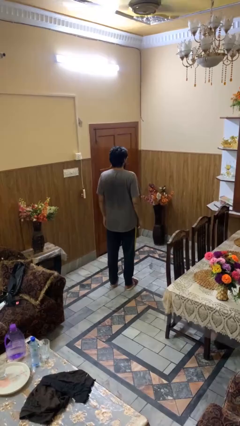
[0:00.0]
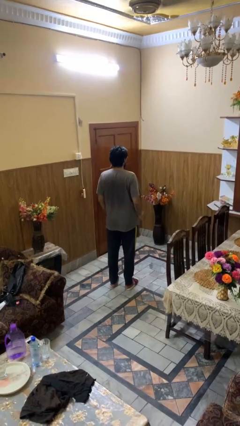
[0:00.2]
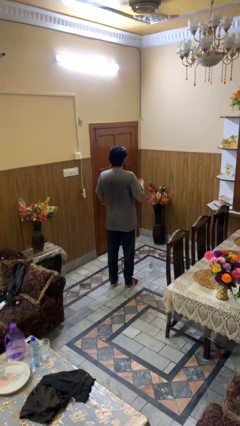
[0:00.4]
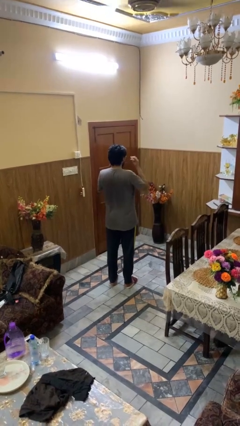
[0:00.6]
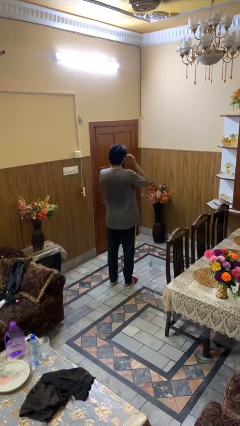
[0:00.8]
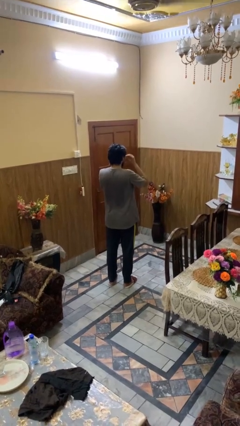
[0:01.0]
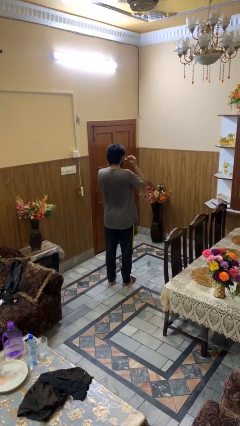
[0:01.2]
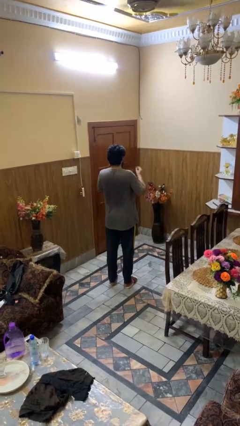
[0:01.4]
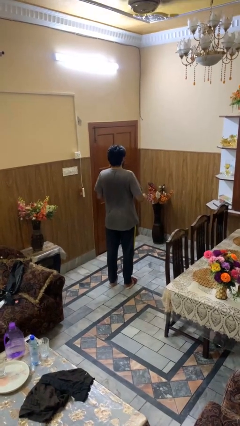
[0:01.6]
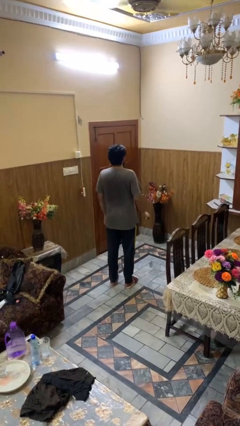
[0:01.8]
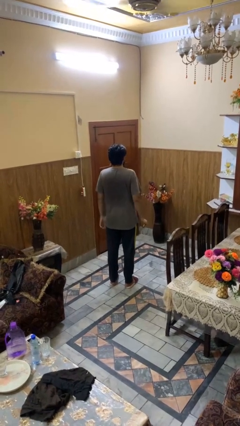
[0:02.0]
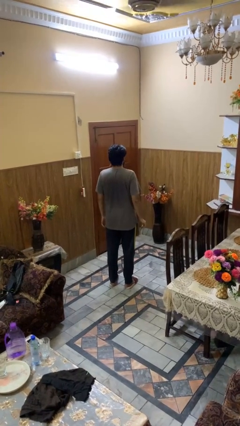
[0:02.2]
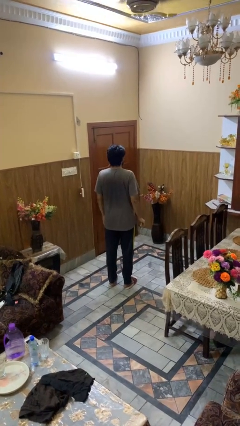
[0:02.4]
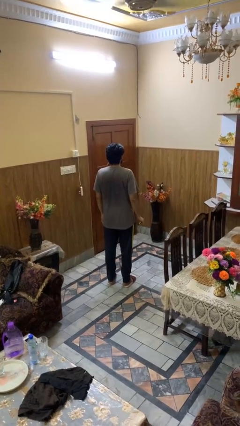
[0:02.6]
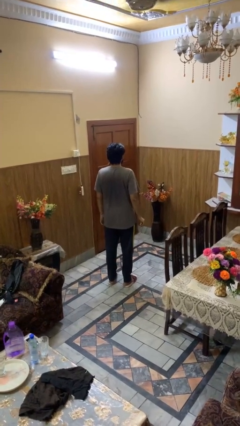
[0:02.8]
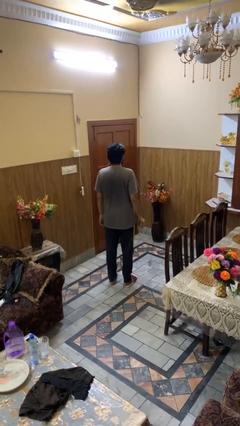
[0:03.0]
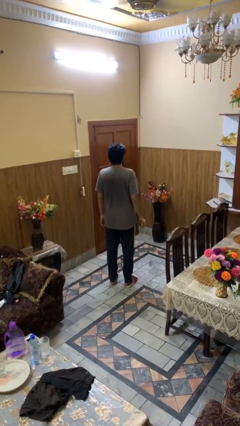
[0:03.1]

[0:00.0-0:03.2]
person takes off glasses

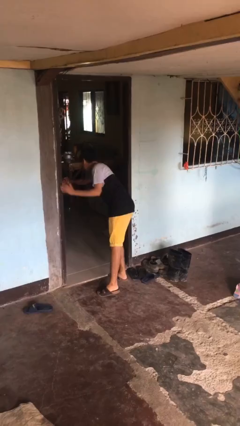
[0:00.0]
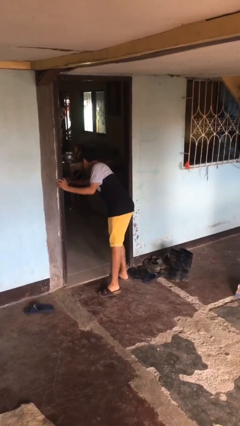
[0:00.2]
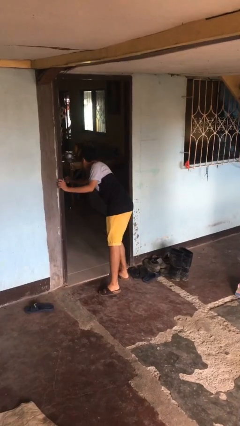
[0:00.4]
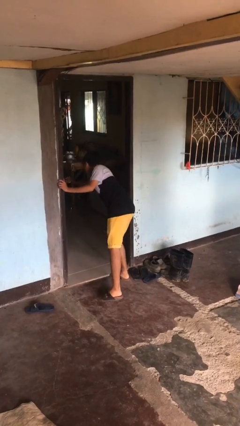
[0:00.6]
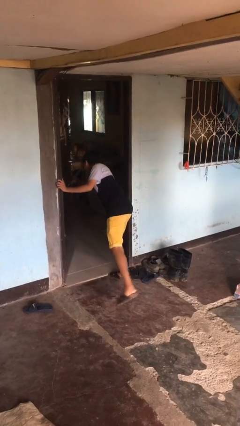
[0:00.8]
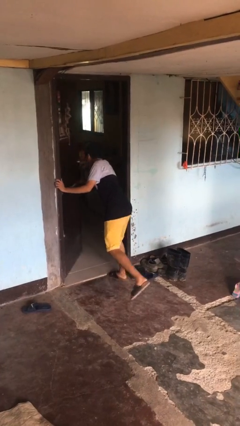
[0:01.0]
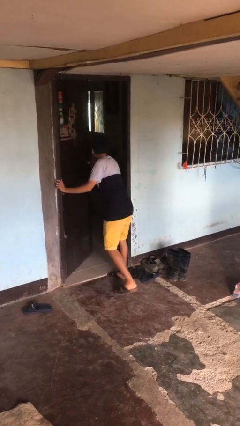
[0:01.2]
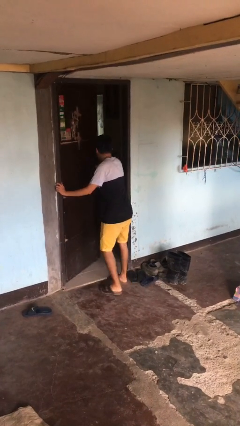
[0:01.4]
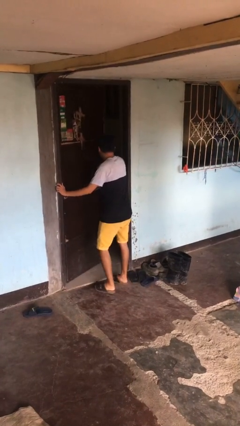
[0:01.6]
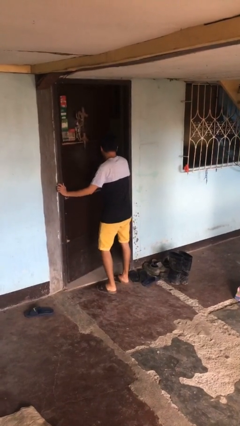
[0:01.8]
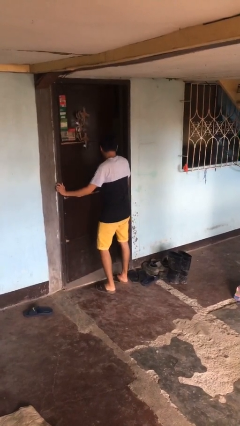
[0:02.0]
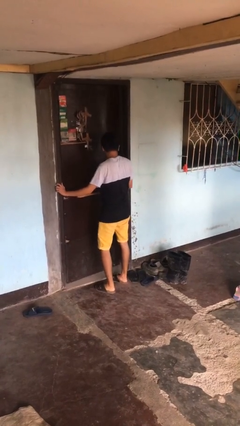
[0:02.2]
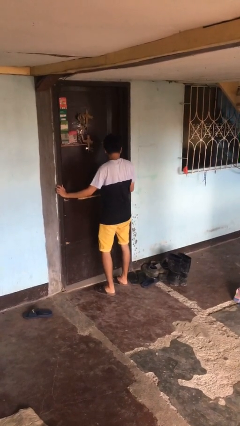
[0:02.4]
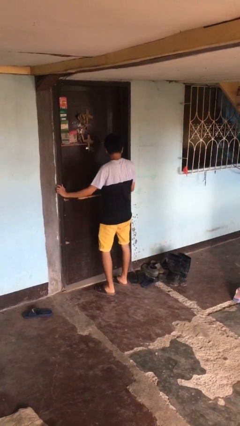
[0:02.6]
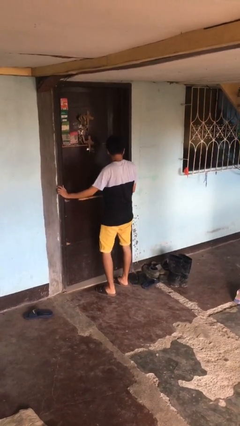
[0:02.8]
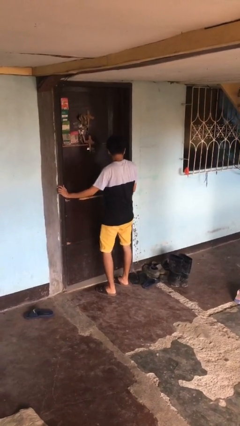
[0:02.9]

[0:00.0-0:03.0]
person closes facility door

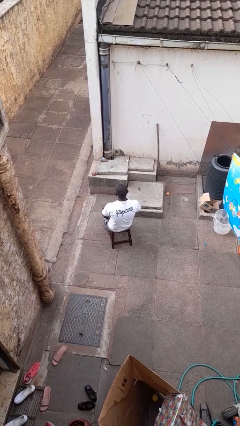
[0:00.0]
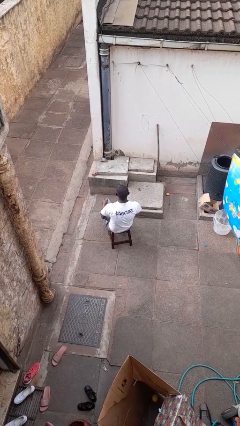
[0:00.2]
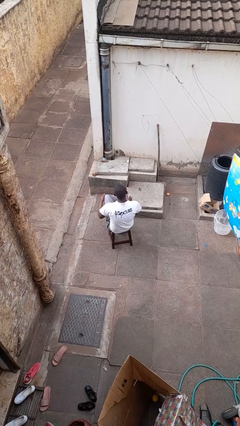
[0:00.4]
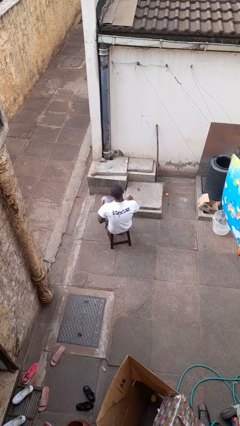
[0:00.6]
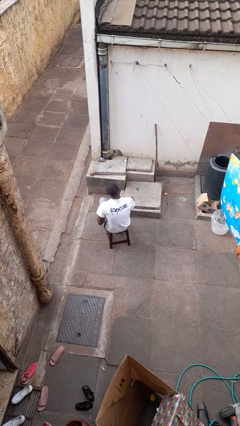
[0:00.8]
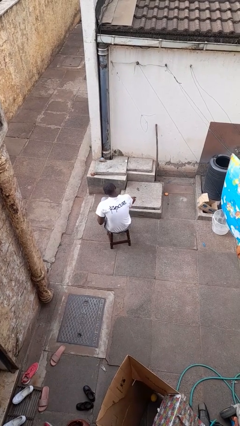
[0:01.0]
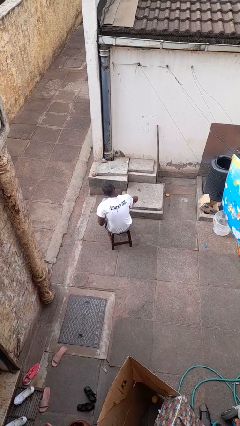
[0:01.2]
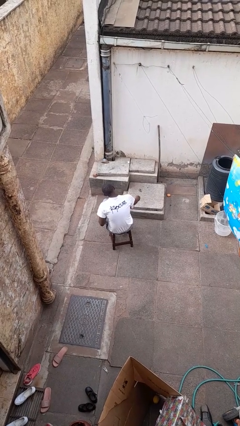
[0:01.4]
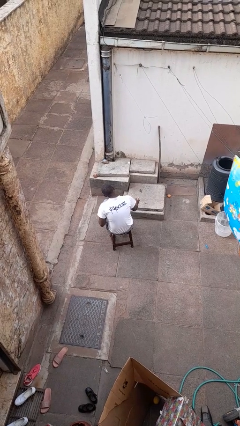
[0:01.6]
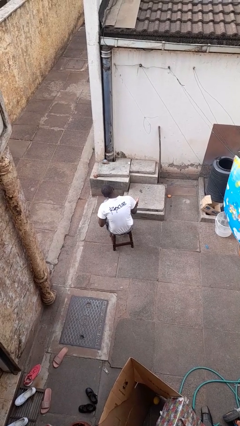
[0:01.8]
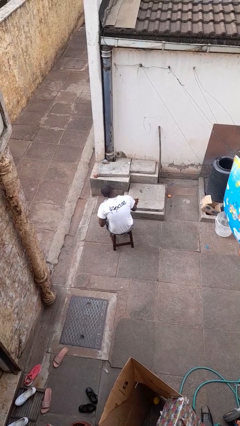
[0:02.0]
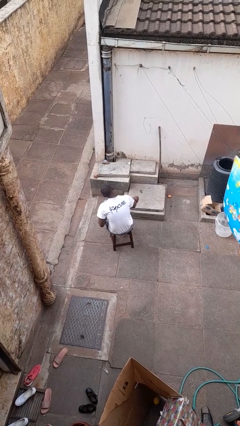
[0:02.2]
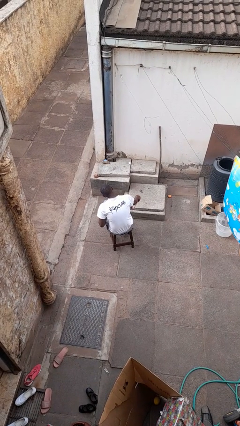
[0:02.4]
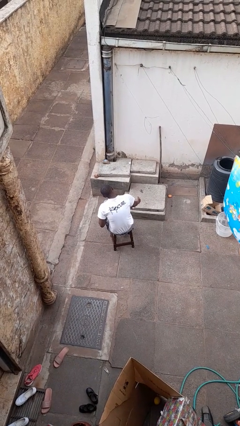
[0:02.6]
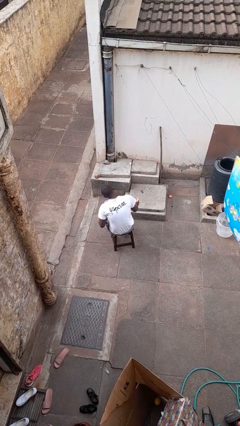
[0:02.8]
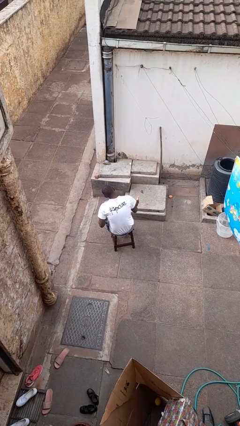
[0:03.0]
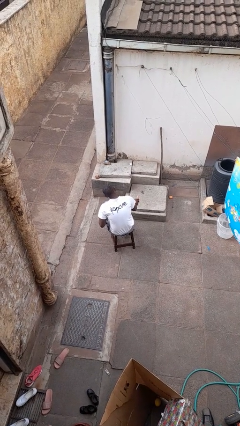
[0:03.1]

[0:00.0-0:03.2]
person rubs foot

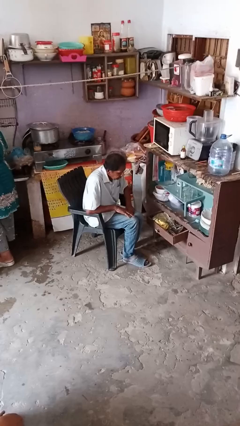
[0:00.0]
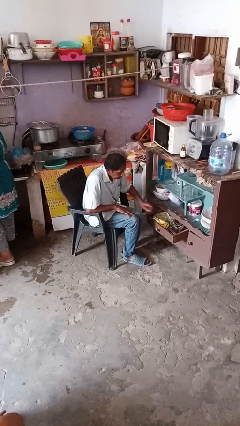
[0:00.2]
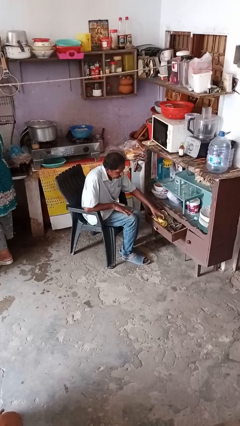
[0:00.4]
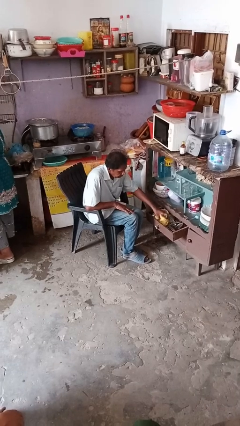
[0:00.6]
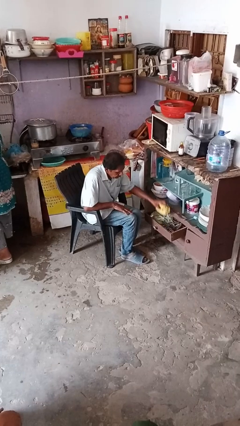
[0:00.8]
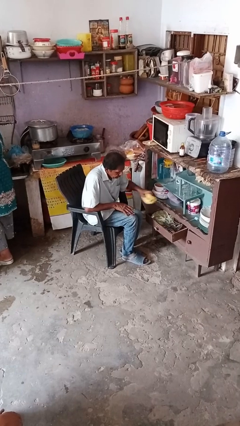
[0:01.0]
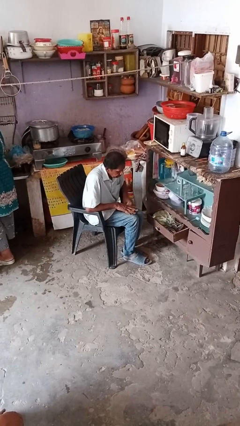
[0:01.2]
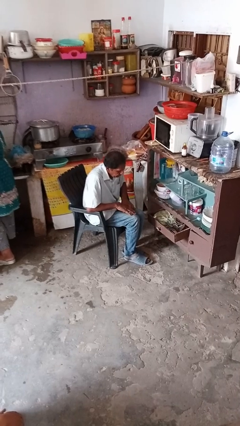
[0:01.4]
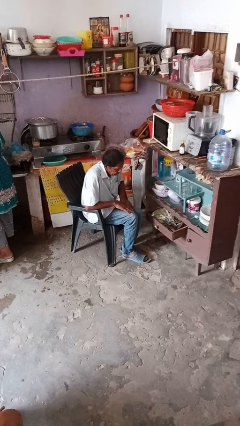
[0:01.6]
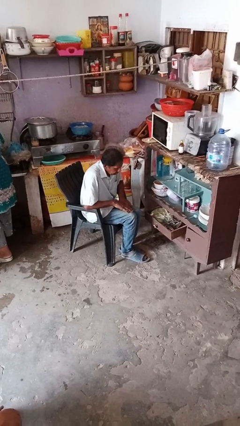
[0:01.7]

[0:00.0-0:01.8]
person takes clothes from dresser

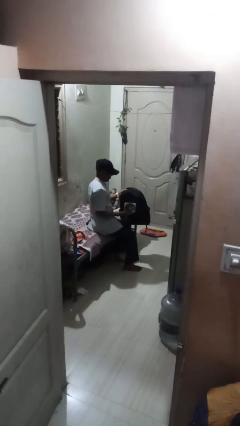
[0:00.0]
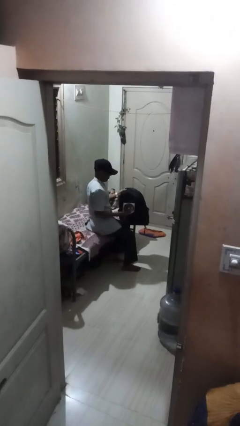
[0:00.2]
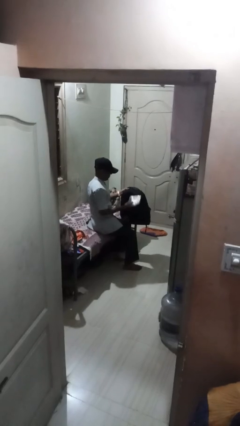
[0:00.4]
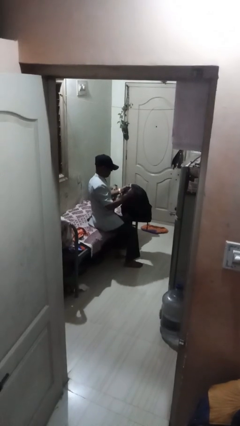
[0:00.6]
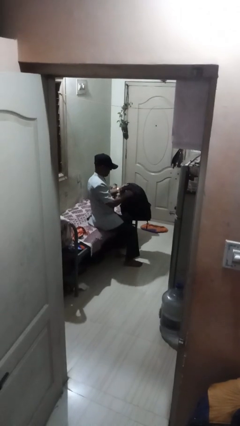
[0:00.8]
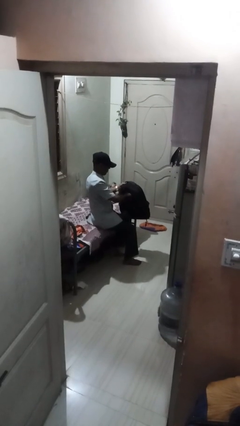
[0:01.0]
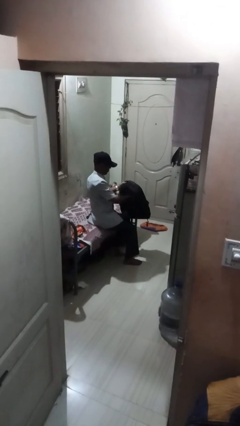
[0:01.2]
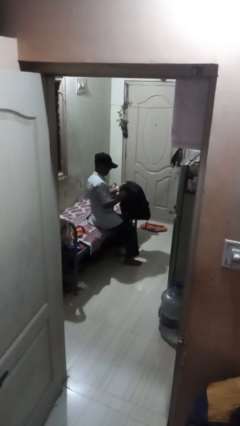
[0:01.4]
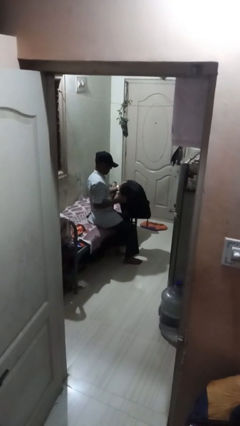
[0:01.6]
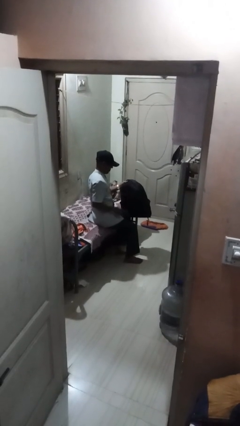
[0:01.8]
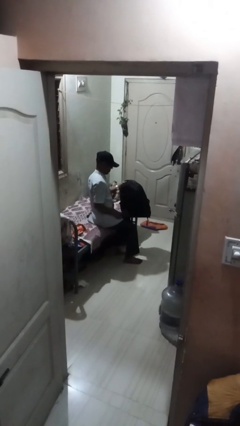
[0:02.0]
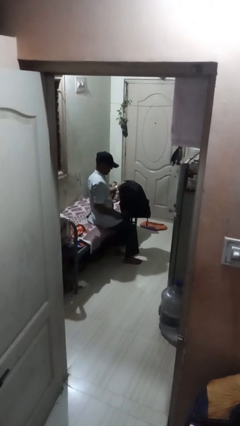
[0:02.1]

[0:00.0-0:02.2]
person puts object into backpack

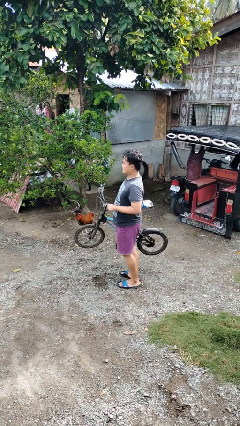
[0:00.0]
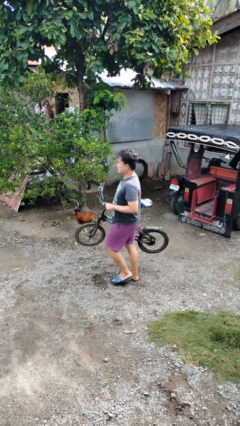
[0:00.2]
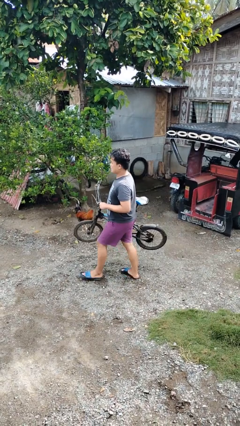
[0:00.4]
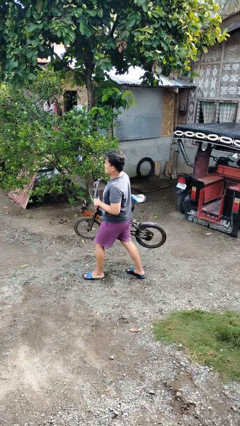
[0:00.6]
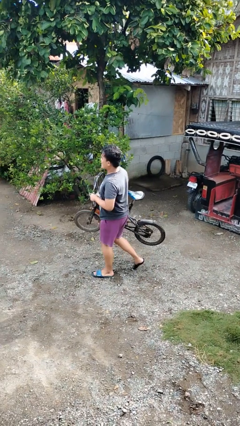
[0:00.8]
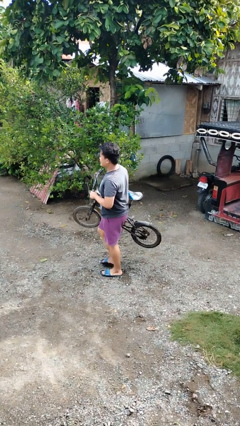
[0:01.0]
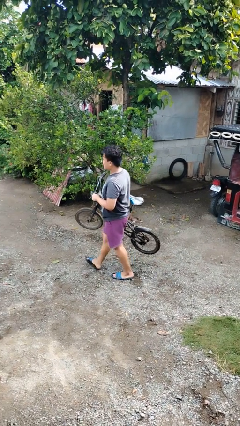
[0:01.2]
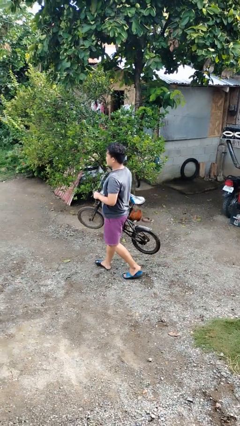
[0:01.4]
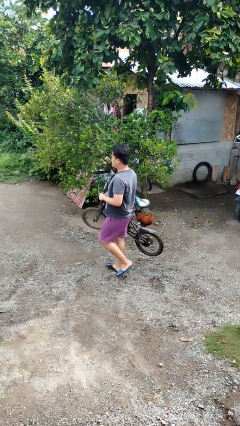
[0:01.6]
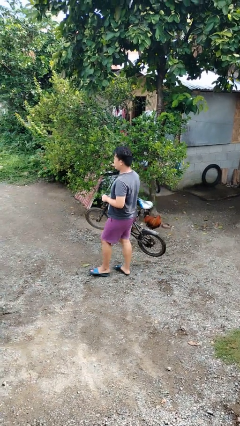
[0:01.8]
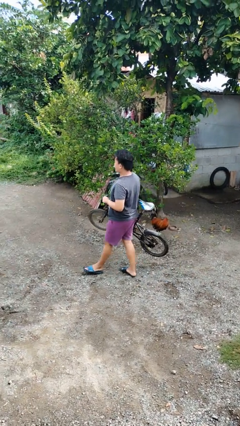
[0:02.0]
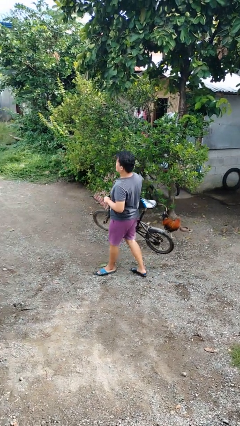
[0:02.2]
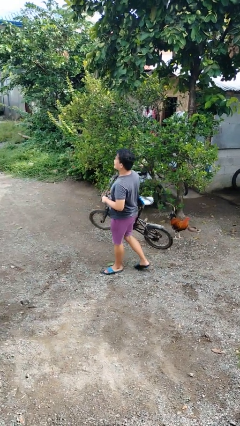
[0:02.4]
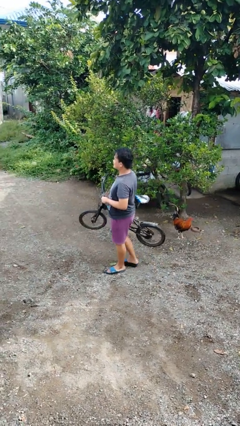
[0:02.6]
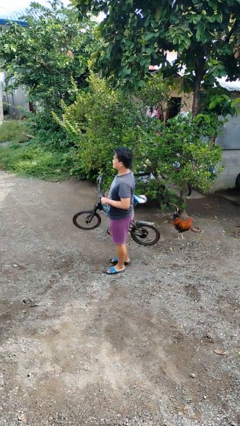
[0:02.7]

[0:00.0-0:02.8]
person carries bicycle

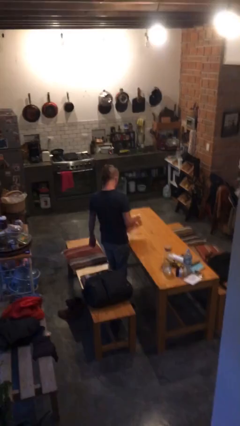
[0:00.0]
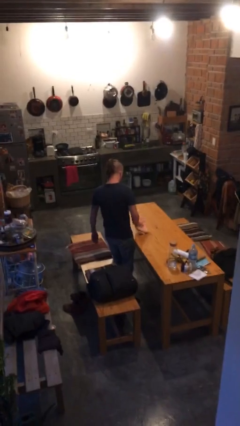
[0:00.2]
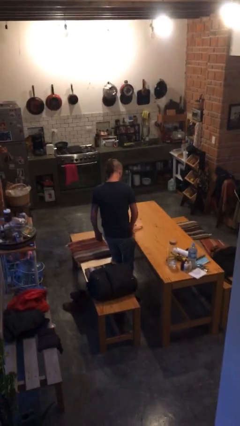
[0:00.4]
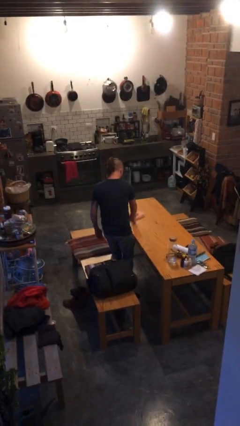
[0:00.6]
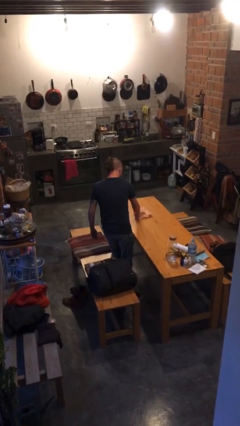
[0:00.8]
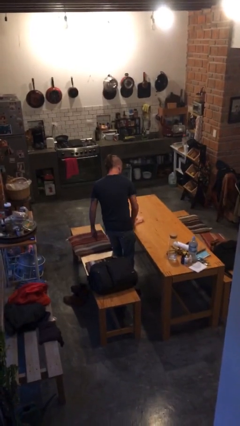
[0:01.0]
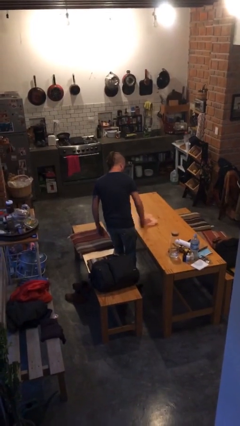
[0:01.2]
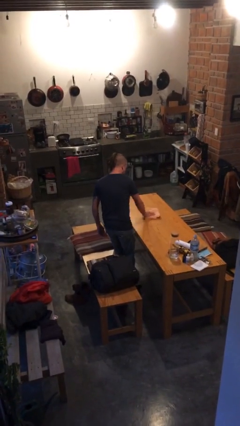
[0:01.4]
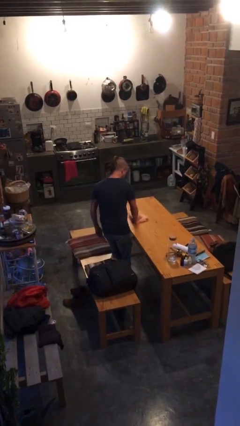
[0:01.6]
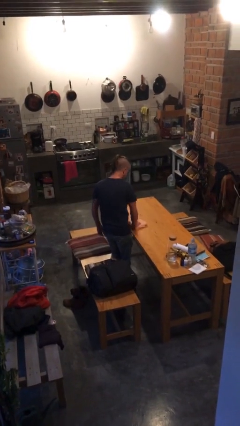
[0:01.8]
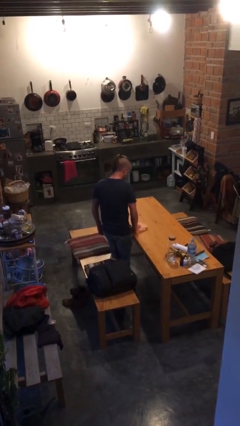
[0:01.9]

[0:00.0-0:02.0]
person cleans table with rag
